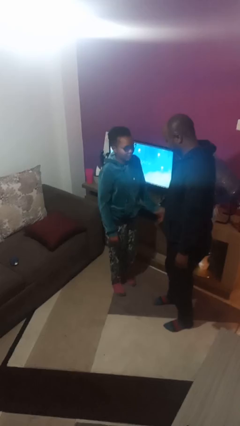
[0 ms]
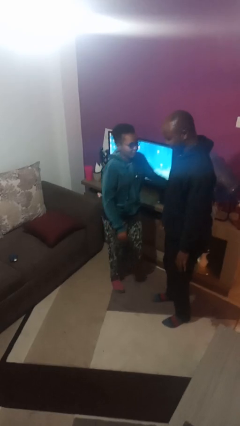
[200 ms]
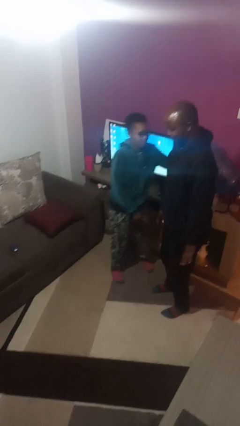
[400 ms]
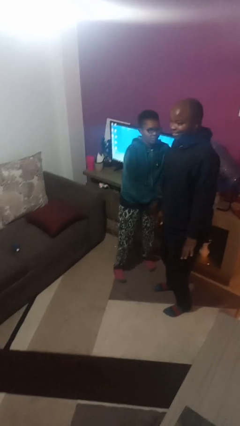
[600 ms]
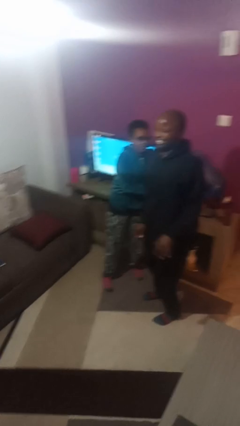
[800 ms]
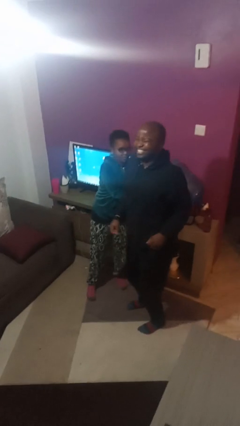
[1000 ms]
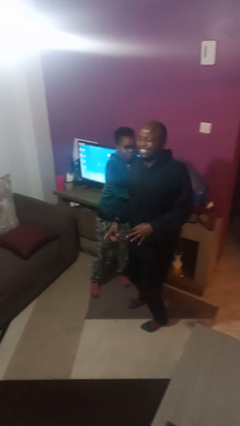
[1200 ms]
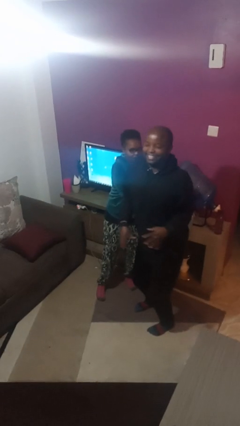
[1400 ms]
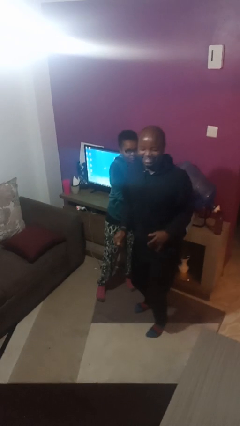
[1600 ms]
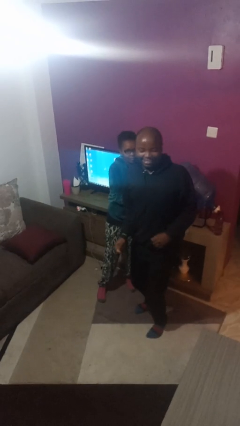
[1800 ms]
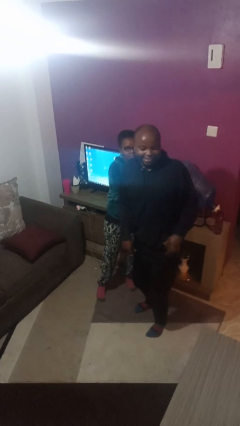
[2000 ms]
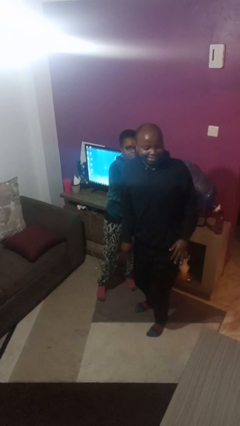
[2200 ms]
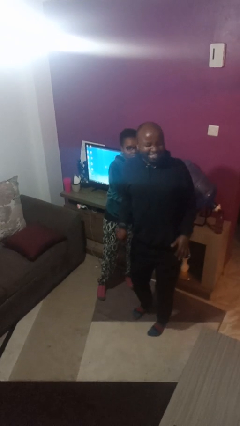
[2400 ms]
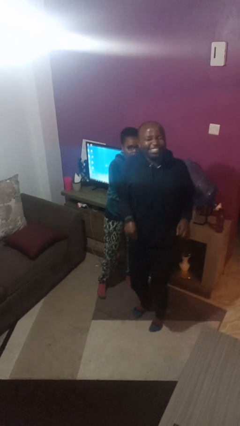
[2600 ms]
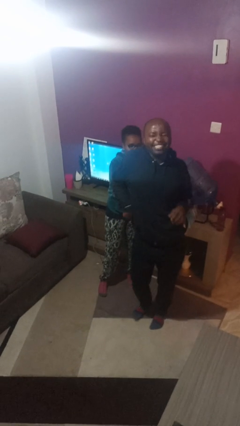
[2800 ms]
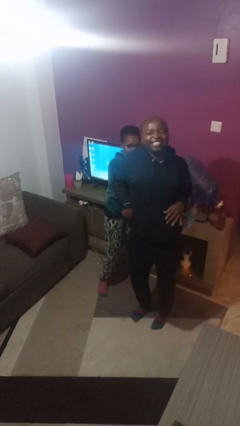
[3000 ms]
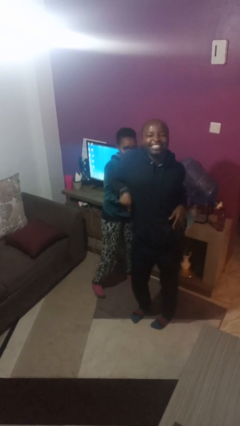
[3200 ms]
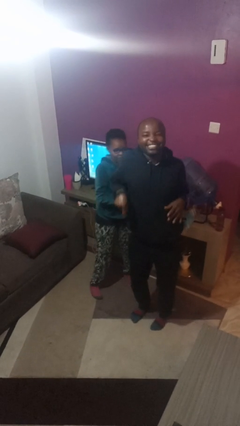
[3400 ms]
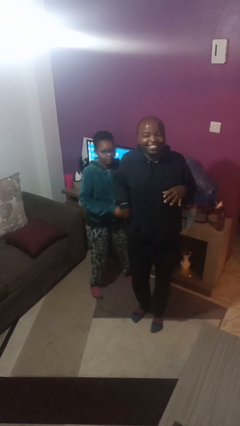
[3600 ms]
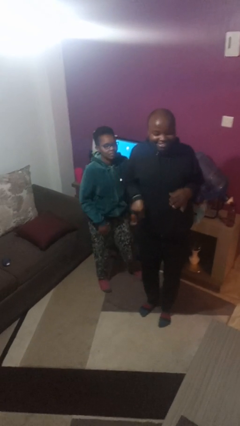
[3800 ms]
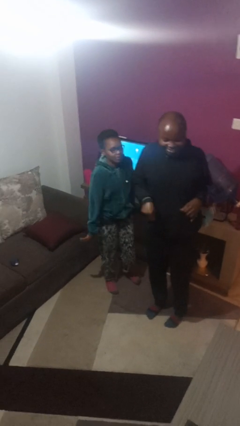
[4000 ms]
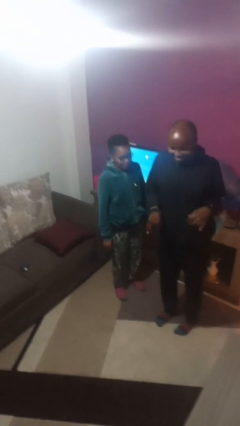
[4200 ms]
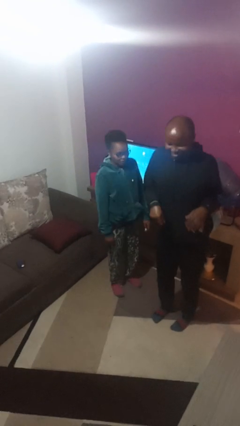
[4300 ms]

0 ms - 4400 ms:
person tickles person

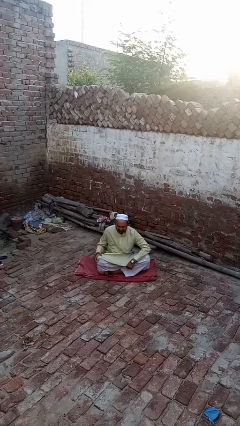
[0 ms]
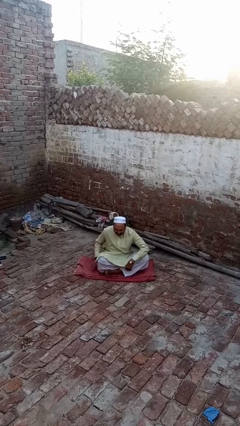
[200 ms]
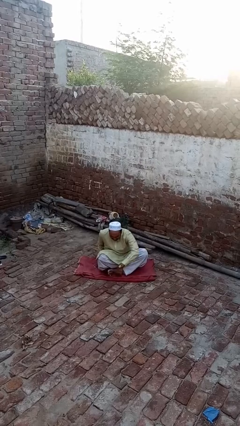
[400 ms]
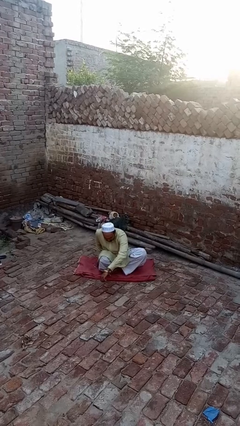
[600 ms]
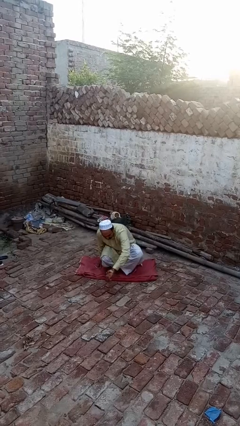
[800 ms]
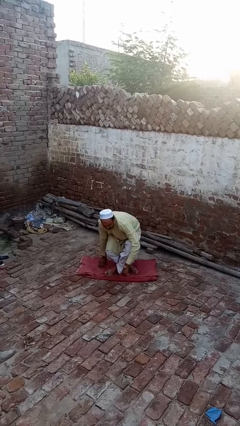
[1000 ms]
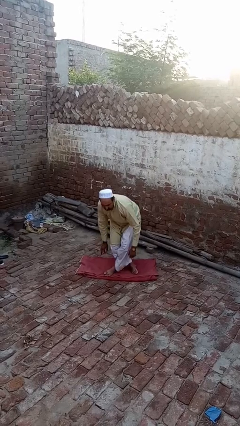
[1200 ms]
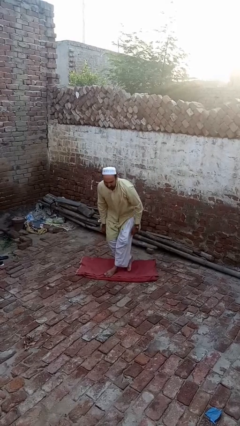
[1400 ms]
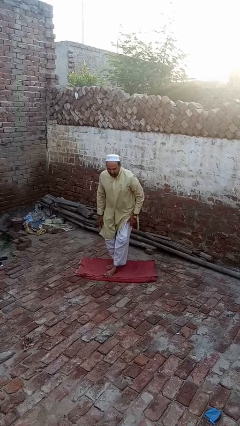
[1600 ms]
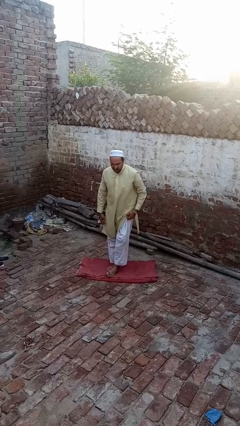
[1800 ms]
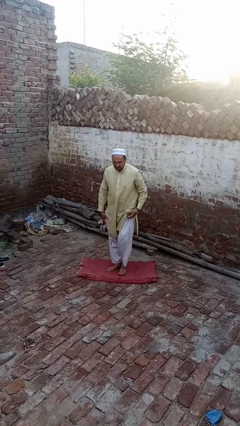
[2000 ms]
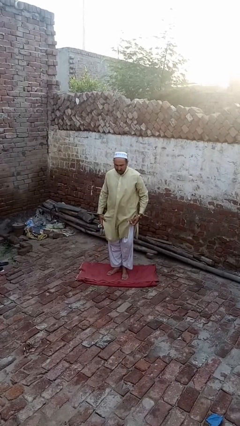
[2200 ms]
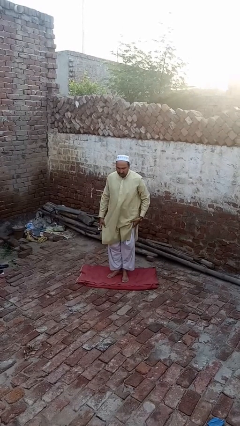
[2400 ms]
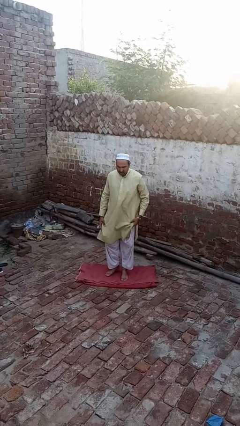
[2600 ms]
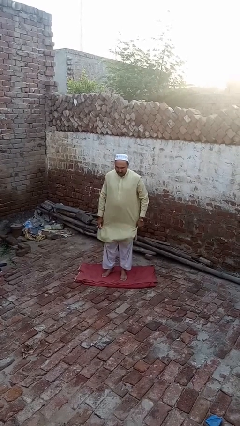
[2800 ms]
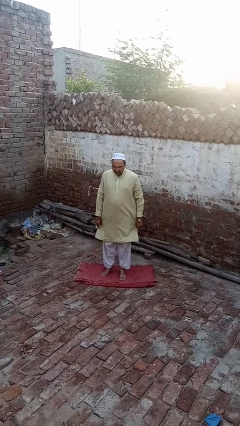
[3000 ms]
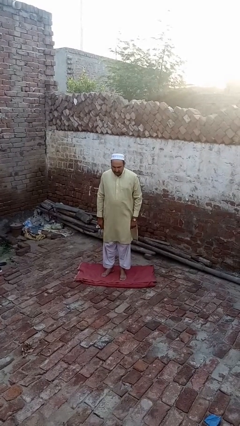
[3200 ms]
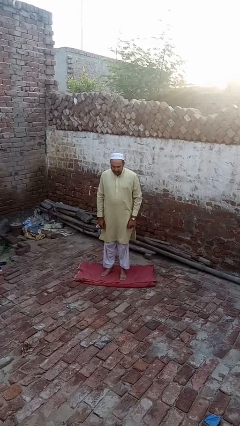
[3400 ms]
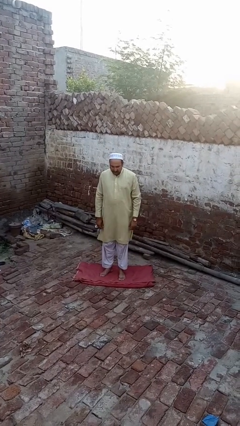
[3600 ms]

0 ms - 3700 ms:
person stands up from floor

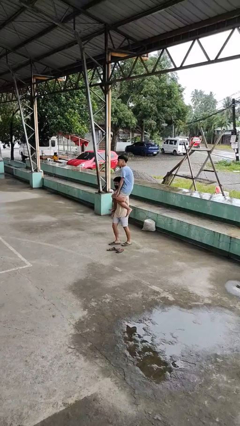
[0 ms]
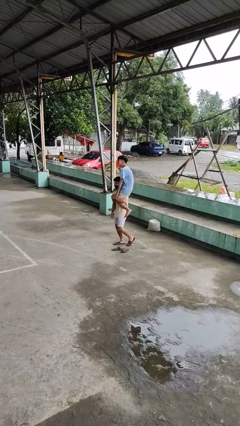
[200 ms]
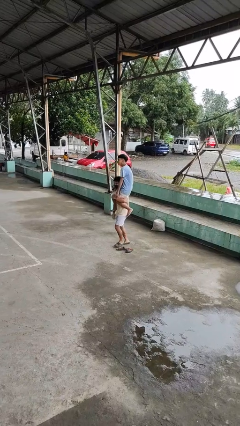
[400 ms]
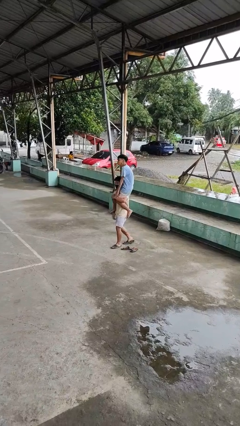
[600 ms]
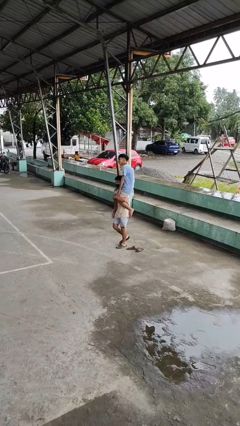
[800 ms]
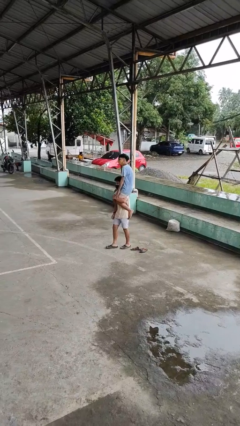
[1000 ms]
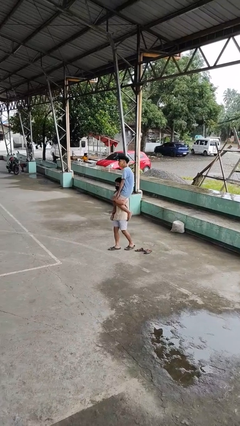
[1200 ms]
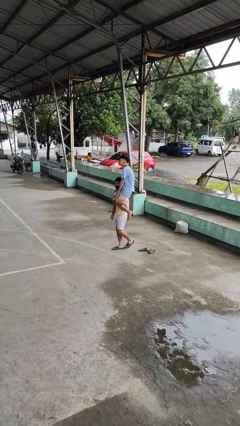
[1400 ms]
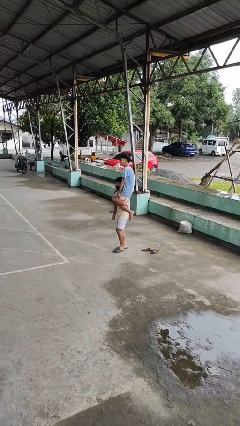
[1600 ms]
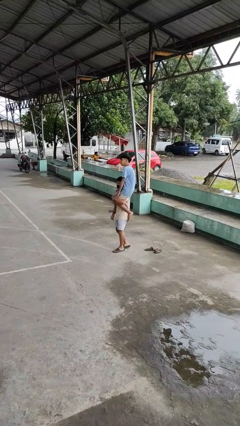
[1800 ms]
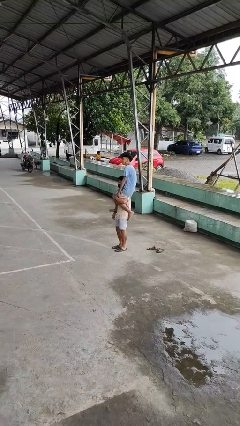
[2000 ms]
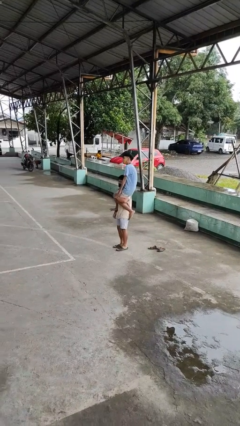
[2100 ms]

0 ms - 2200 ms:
person carries person on shoulders

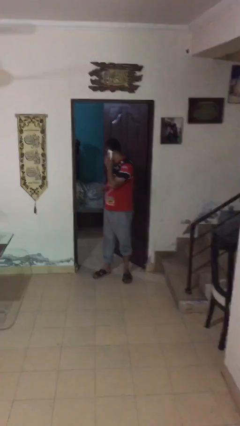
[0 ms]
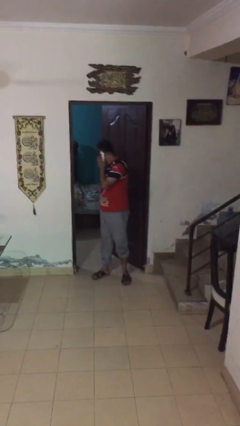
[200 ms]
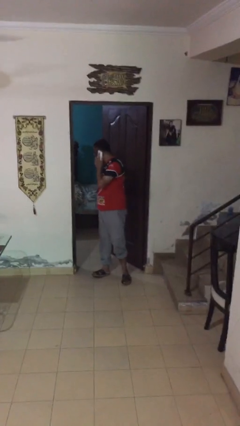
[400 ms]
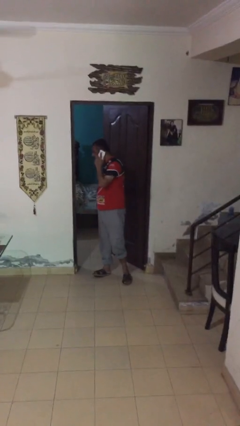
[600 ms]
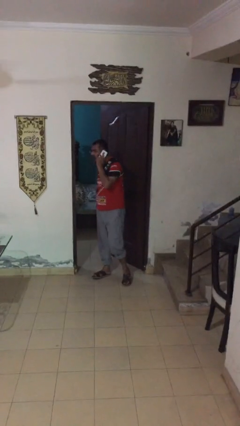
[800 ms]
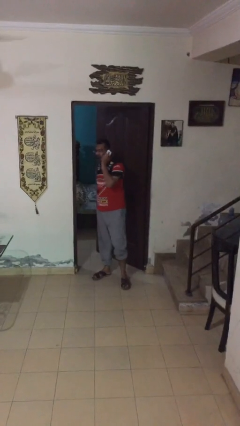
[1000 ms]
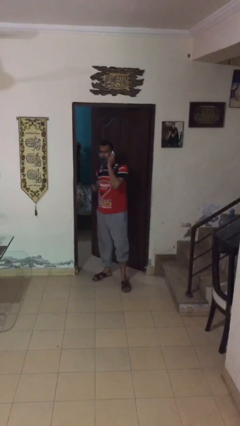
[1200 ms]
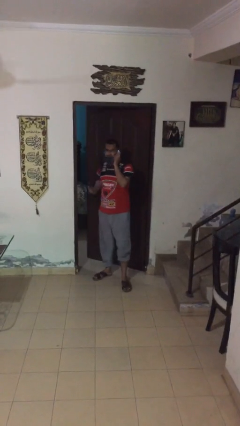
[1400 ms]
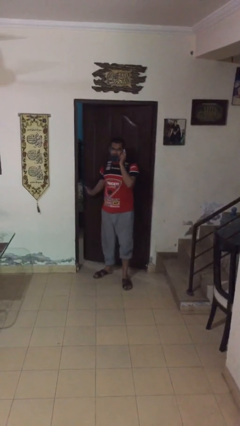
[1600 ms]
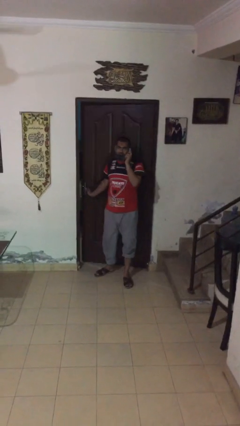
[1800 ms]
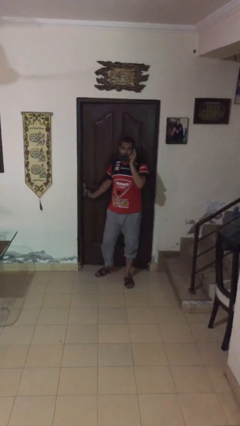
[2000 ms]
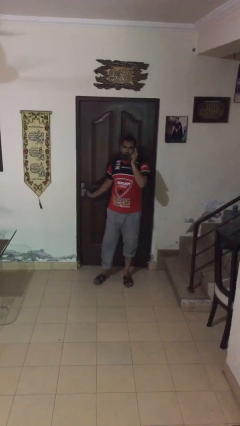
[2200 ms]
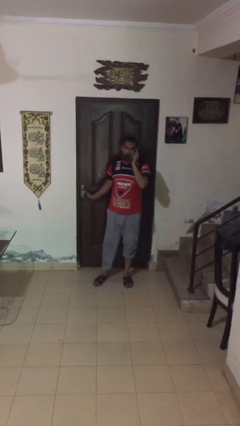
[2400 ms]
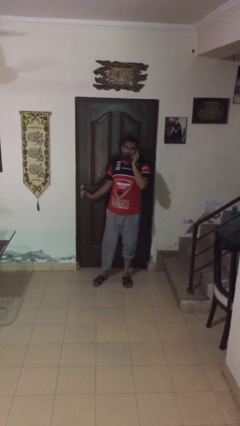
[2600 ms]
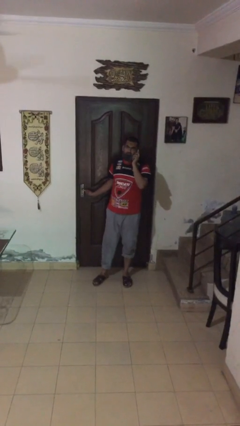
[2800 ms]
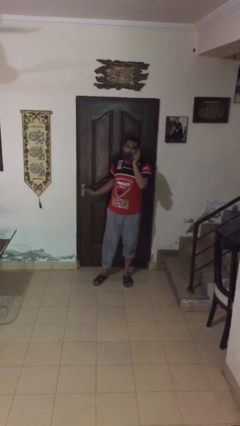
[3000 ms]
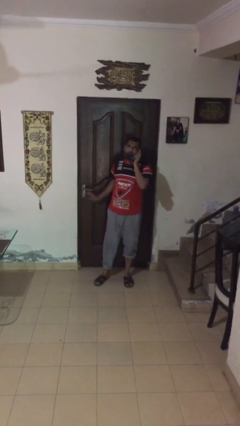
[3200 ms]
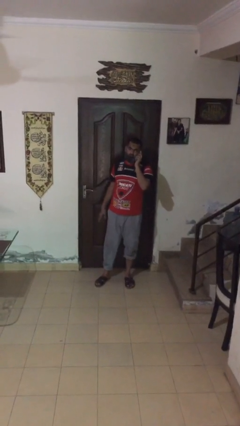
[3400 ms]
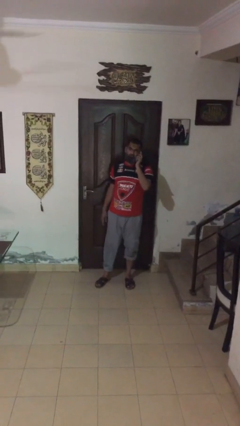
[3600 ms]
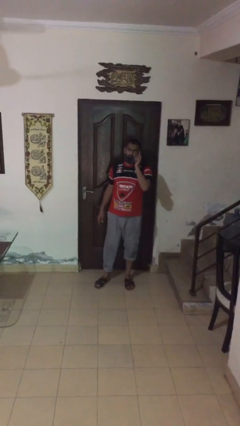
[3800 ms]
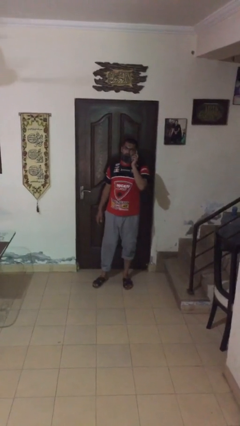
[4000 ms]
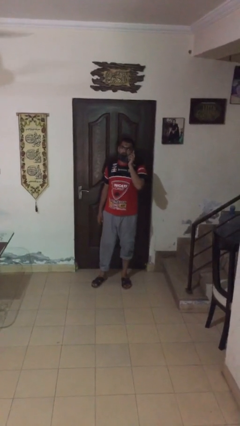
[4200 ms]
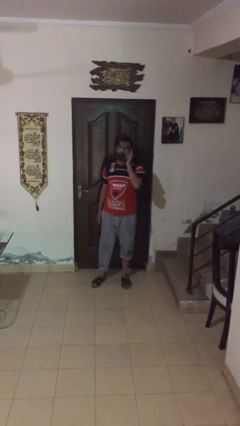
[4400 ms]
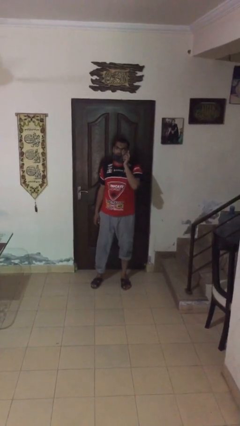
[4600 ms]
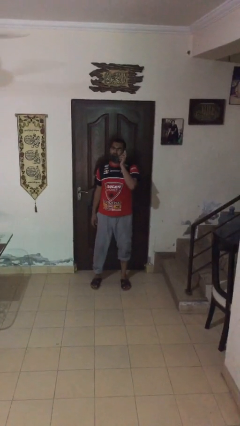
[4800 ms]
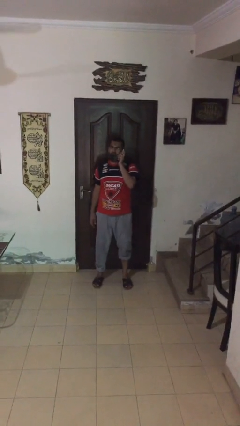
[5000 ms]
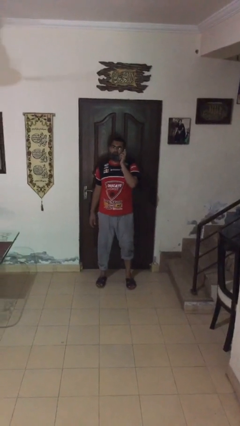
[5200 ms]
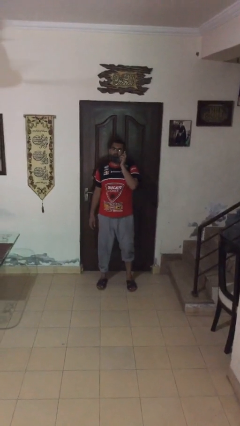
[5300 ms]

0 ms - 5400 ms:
person closes facility door

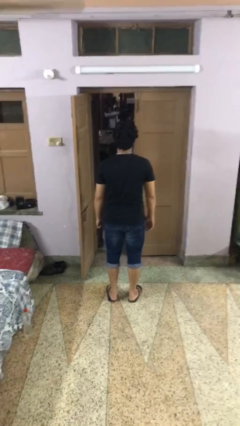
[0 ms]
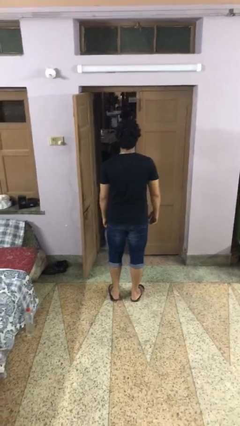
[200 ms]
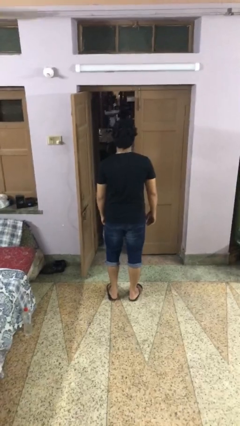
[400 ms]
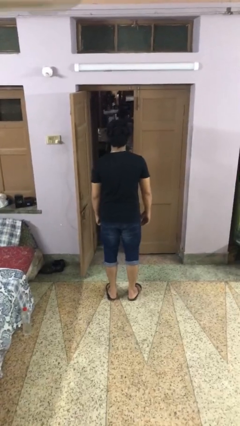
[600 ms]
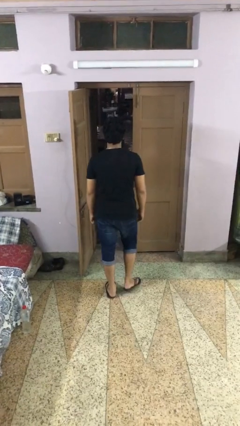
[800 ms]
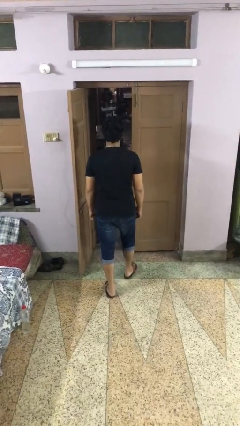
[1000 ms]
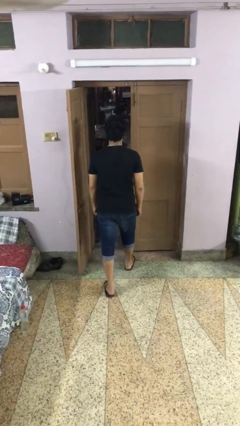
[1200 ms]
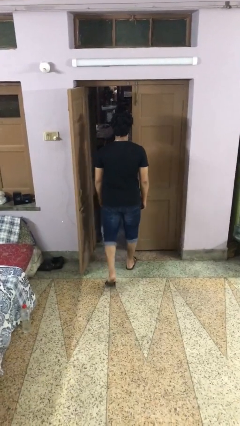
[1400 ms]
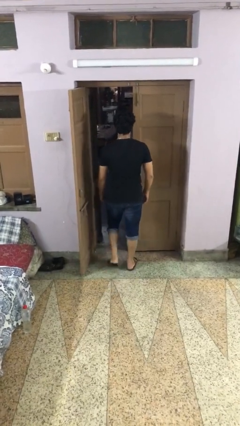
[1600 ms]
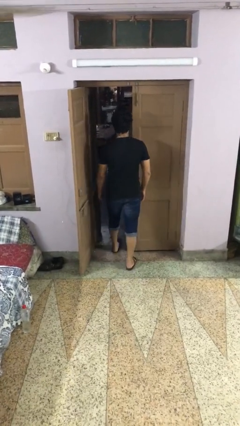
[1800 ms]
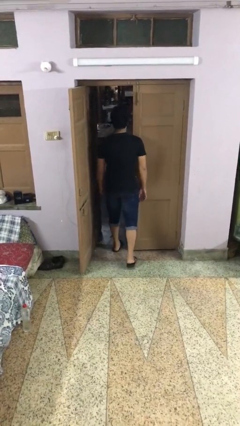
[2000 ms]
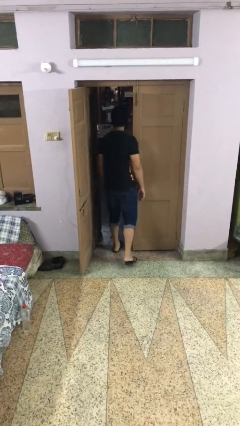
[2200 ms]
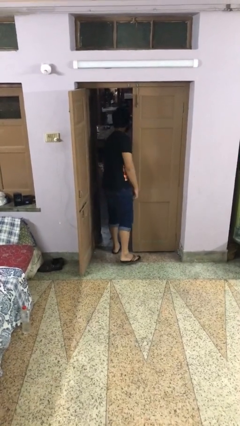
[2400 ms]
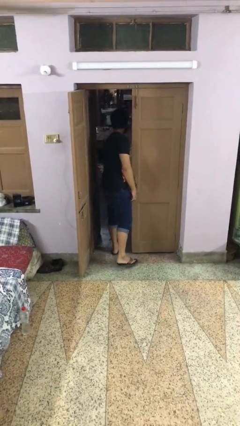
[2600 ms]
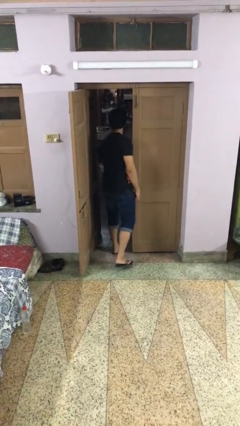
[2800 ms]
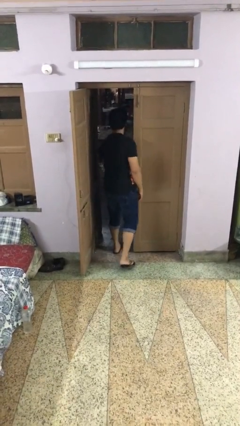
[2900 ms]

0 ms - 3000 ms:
person bumps into wall
